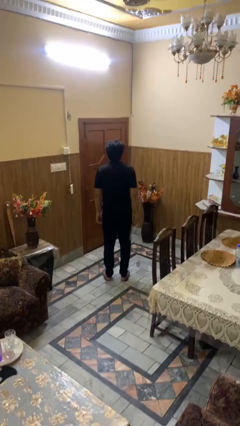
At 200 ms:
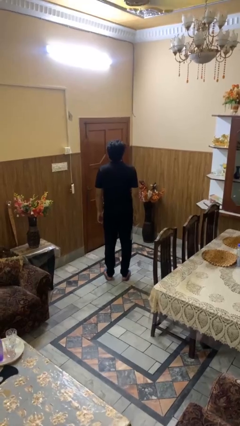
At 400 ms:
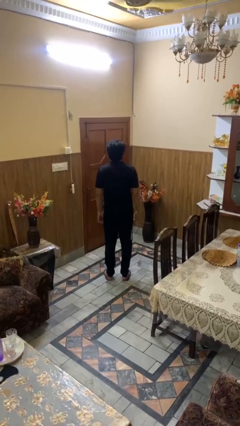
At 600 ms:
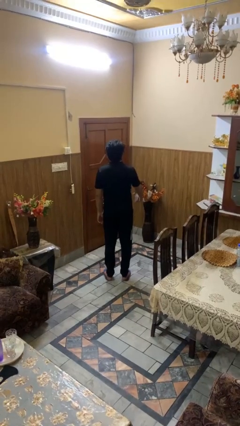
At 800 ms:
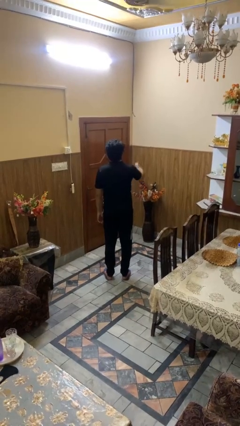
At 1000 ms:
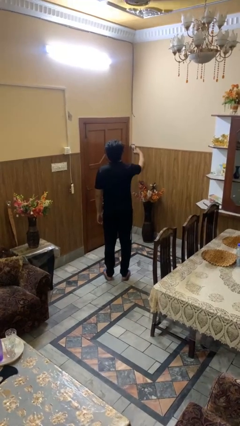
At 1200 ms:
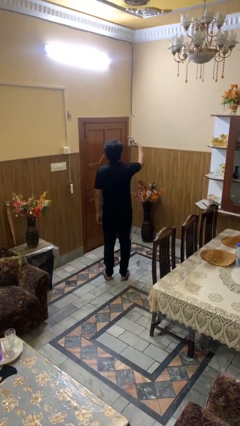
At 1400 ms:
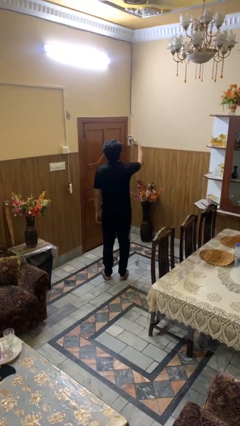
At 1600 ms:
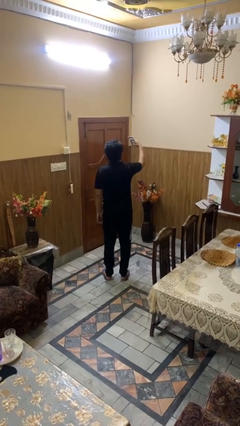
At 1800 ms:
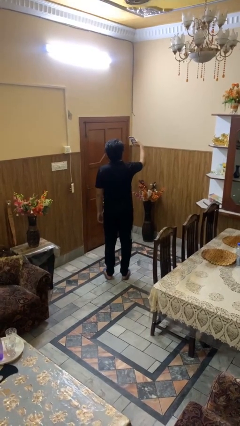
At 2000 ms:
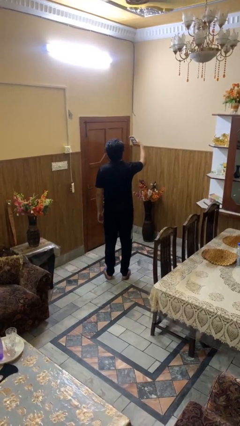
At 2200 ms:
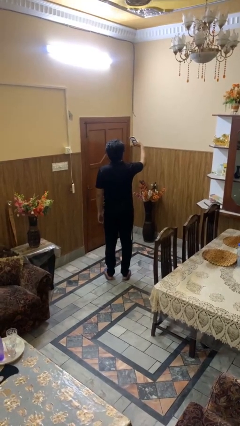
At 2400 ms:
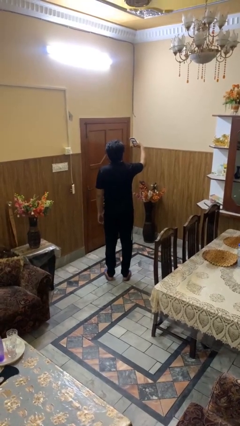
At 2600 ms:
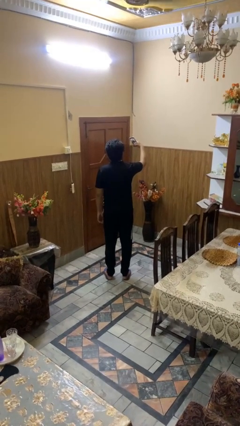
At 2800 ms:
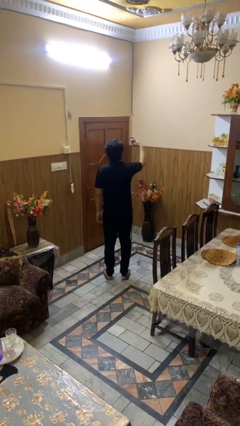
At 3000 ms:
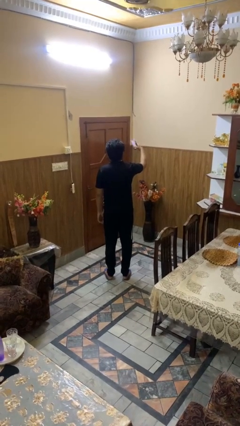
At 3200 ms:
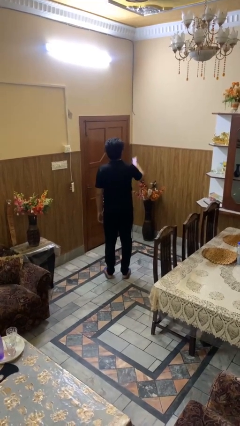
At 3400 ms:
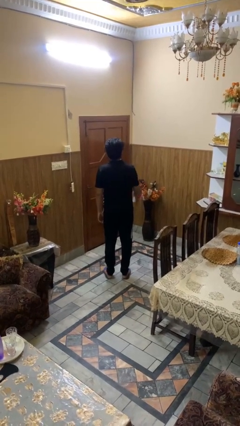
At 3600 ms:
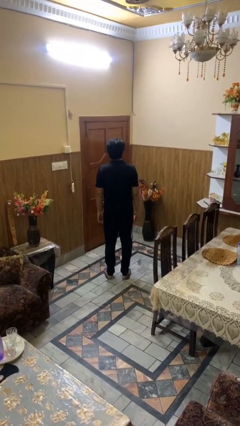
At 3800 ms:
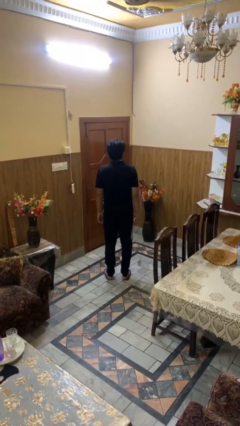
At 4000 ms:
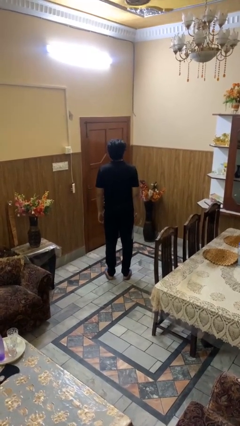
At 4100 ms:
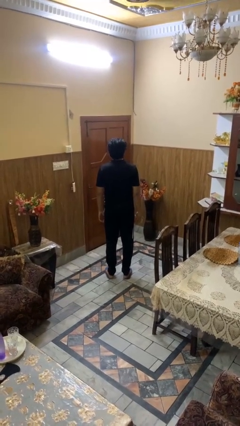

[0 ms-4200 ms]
person takes selfie

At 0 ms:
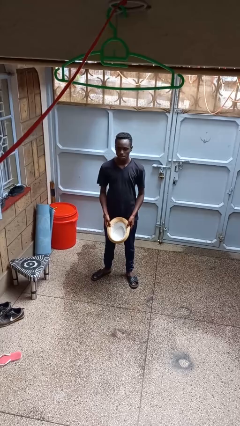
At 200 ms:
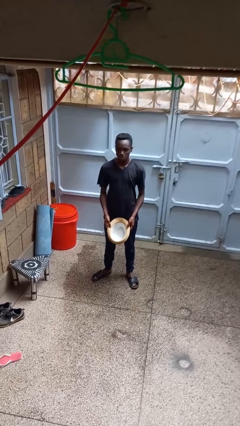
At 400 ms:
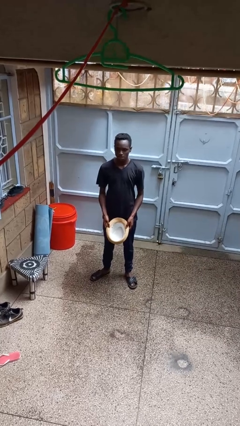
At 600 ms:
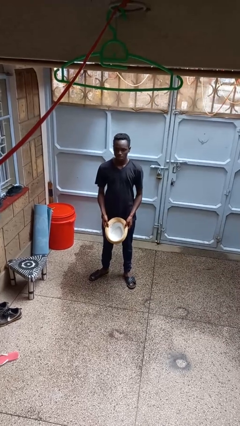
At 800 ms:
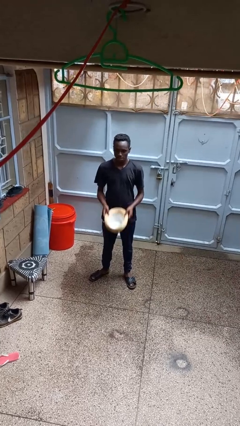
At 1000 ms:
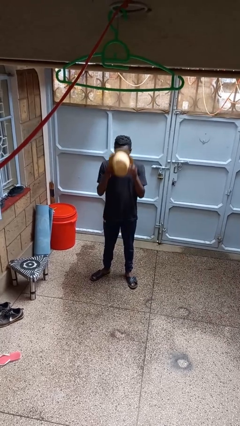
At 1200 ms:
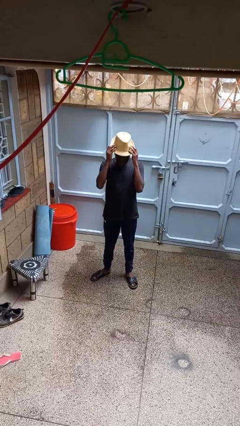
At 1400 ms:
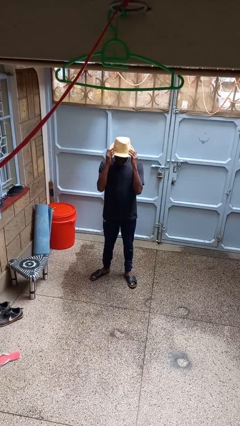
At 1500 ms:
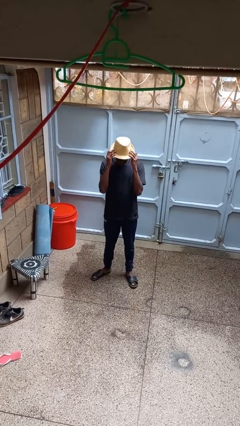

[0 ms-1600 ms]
person puts on hat

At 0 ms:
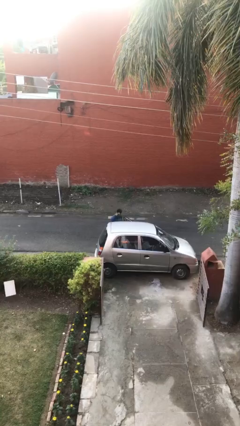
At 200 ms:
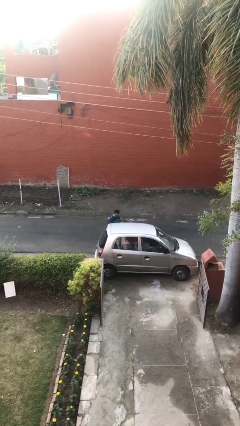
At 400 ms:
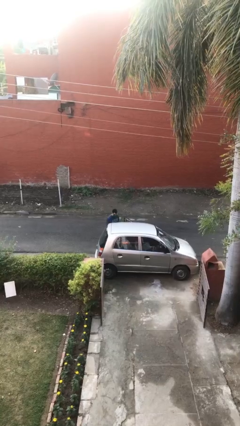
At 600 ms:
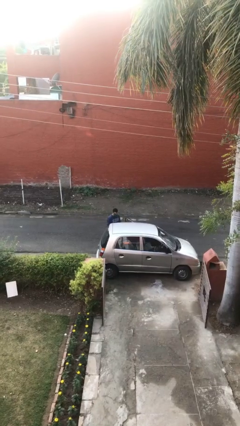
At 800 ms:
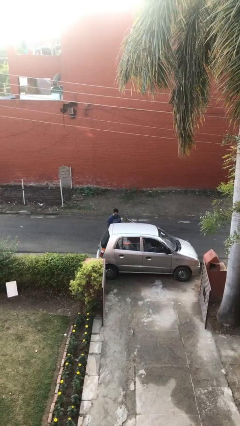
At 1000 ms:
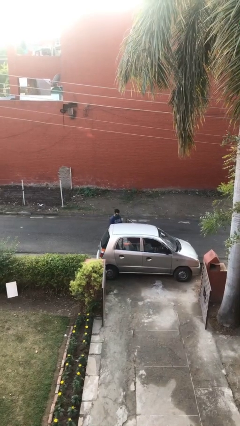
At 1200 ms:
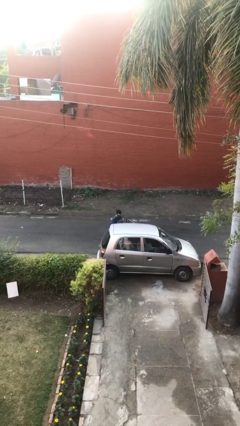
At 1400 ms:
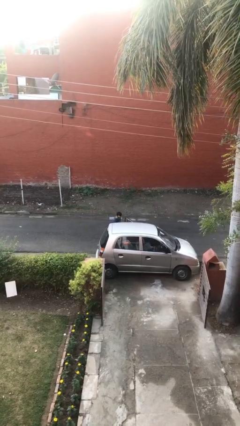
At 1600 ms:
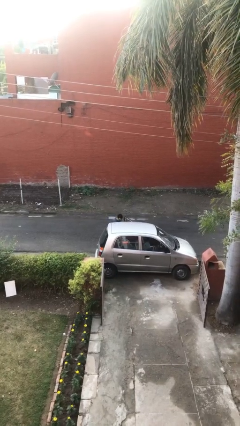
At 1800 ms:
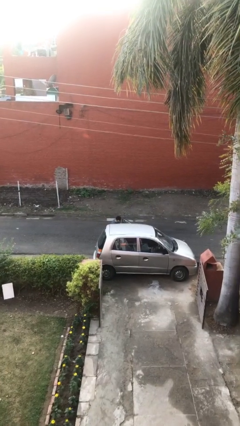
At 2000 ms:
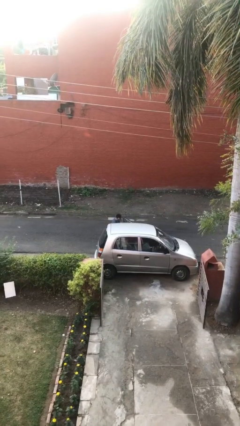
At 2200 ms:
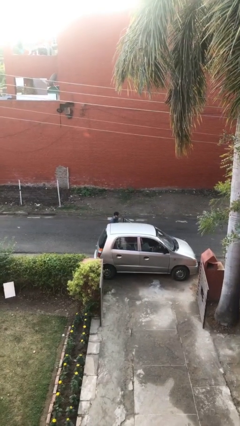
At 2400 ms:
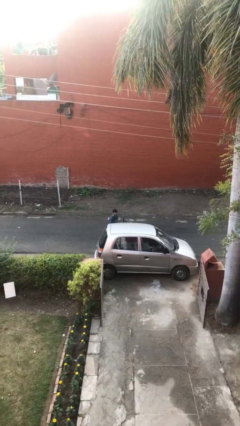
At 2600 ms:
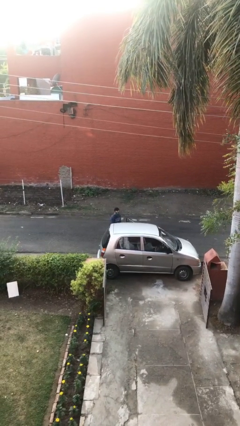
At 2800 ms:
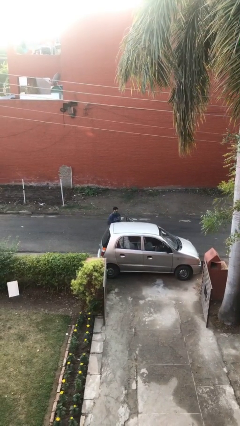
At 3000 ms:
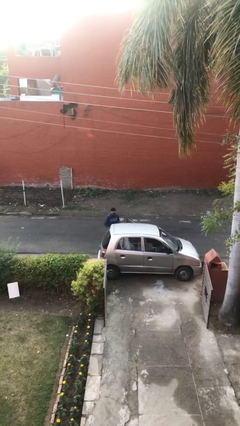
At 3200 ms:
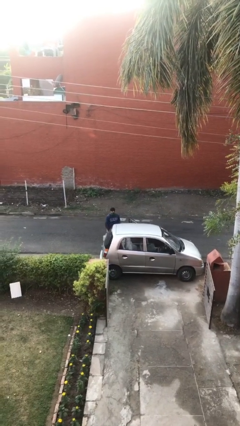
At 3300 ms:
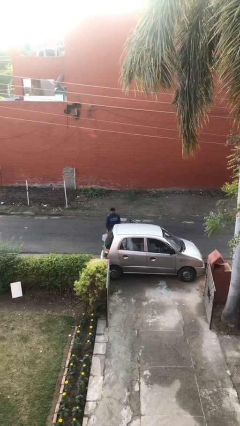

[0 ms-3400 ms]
person unloads car

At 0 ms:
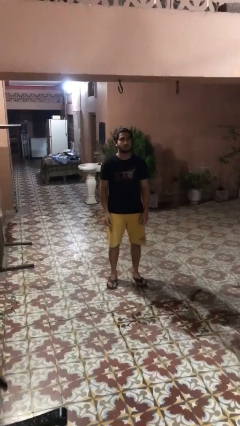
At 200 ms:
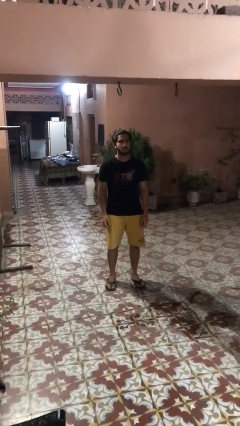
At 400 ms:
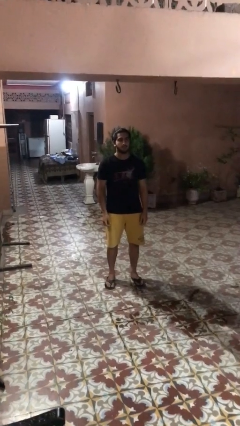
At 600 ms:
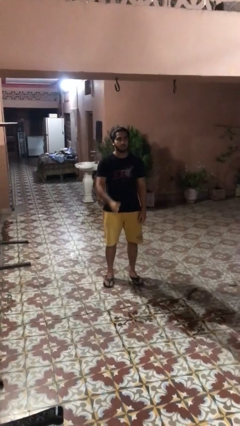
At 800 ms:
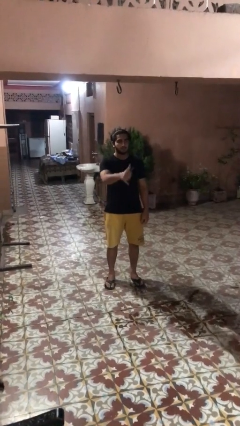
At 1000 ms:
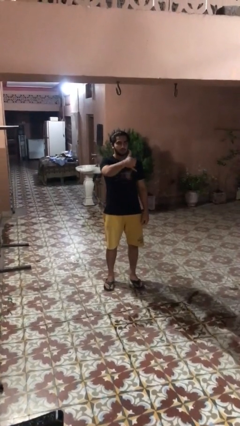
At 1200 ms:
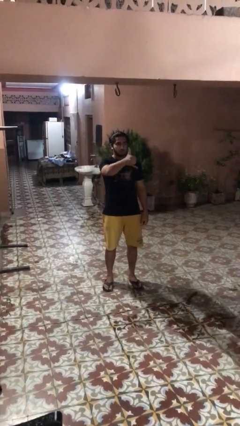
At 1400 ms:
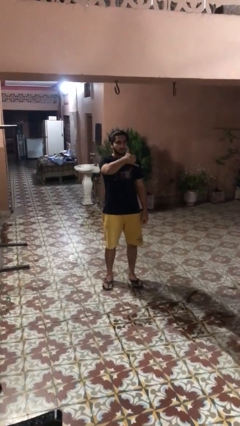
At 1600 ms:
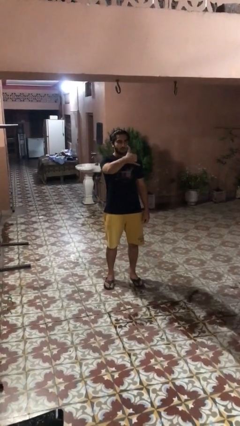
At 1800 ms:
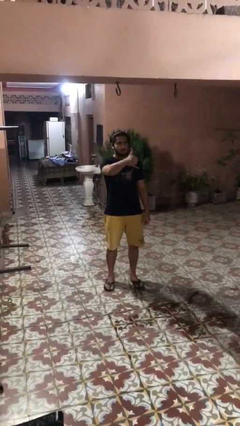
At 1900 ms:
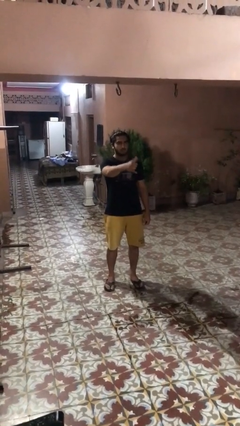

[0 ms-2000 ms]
person gestures hang loose

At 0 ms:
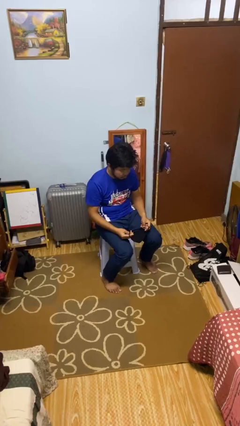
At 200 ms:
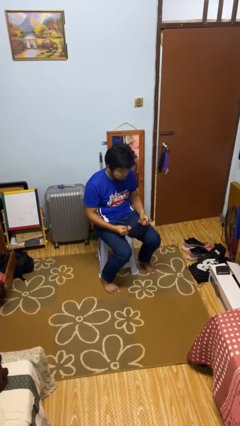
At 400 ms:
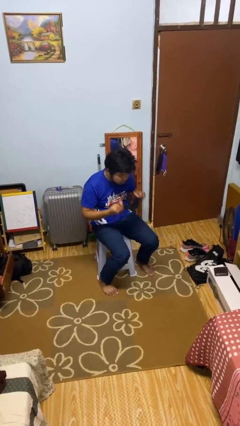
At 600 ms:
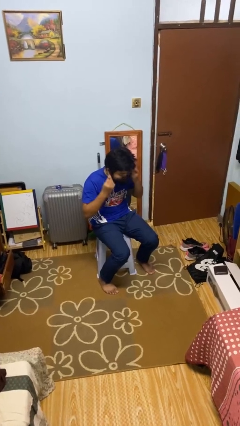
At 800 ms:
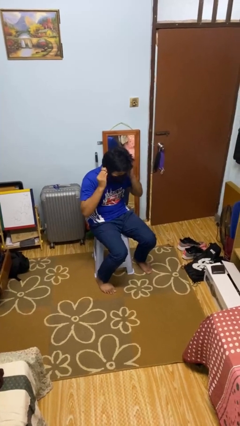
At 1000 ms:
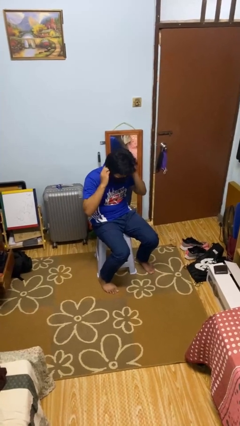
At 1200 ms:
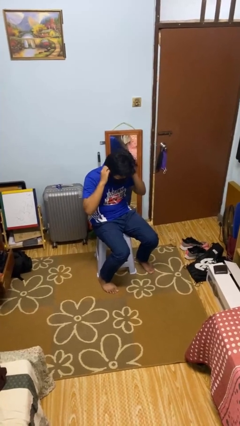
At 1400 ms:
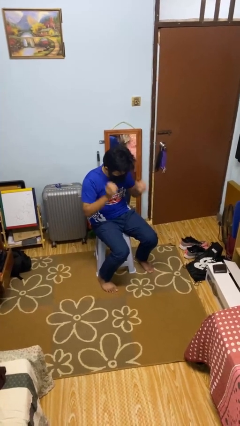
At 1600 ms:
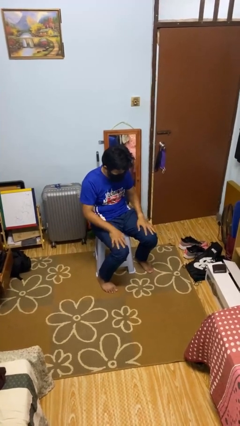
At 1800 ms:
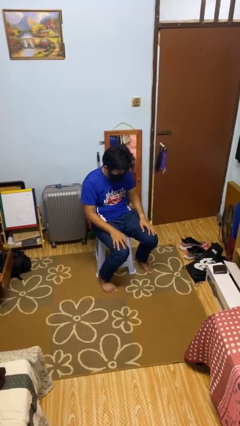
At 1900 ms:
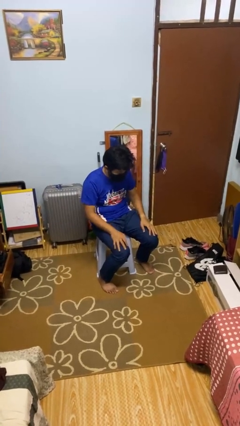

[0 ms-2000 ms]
person puts on facemask

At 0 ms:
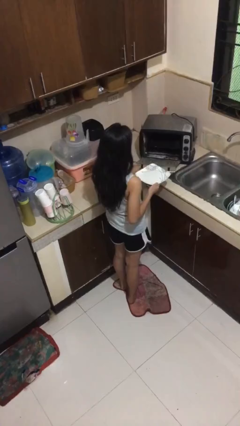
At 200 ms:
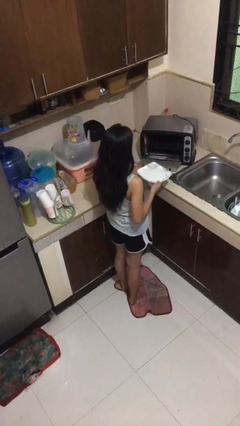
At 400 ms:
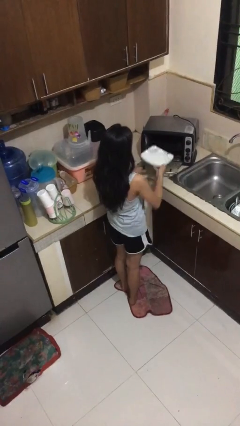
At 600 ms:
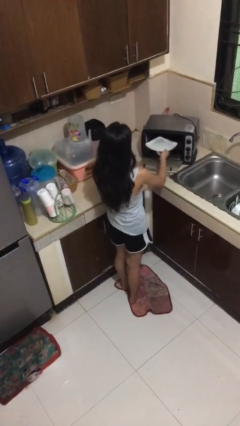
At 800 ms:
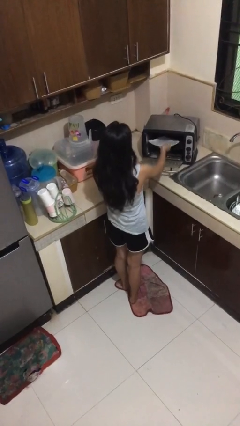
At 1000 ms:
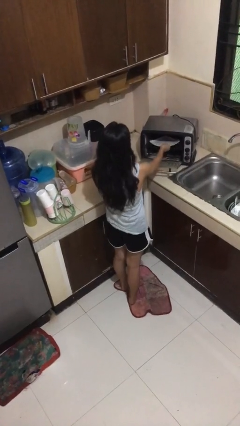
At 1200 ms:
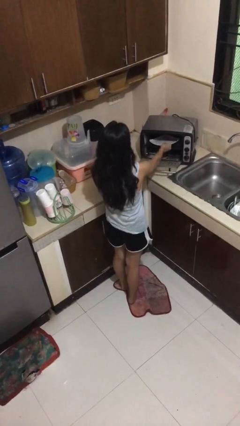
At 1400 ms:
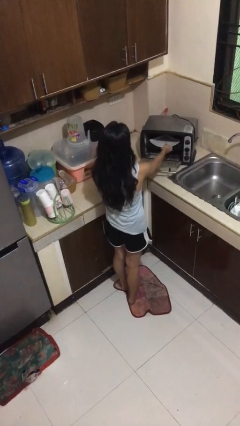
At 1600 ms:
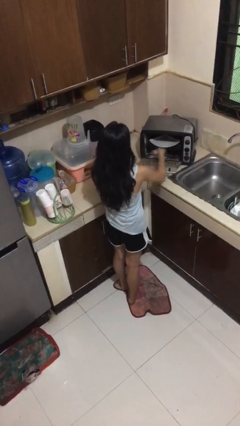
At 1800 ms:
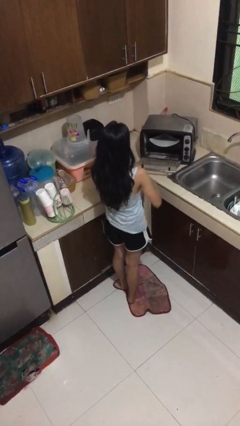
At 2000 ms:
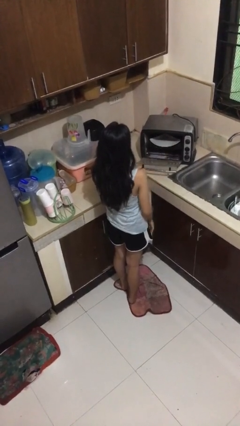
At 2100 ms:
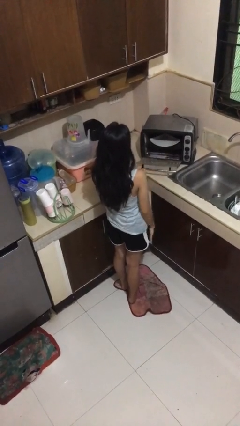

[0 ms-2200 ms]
person puts object into microwave

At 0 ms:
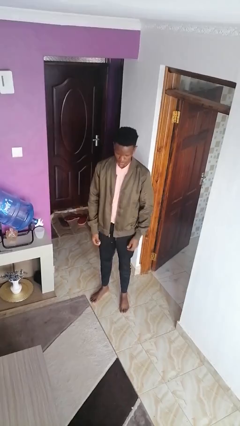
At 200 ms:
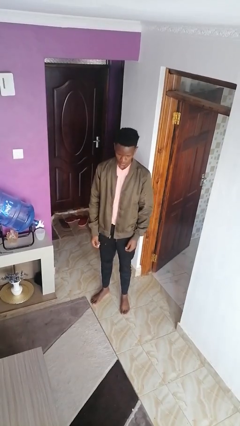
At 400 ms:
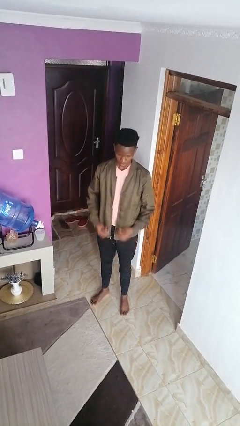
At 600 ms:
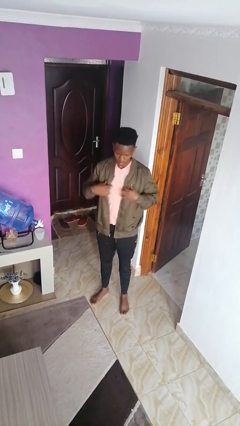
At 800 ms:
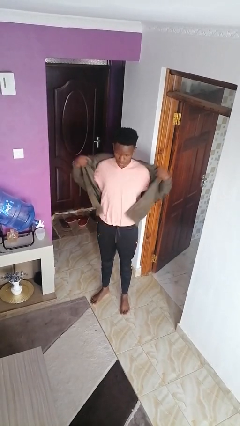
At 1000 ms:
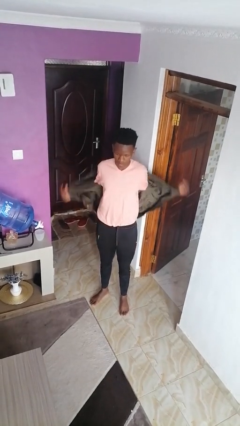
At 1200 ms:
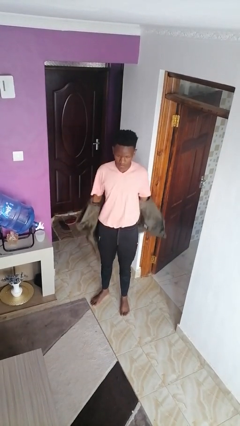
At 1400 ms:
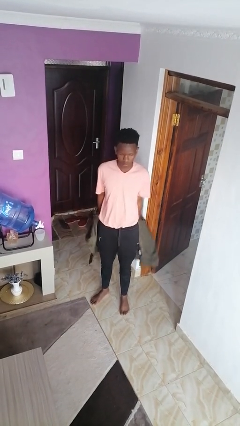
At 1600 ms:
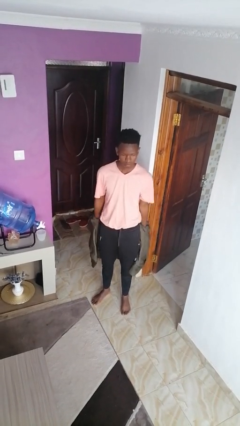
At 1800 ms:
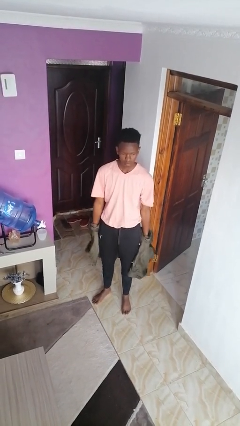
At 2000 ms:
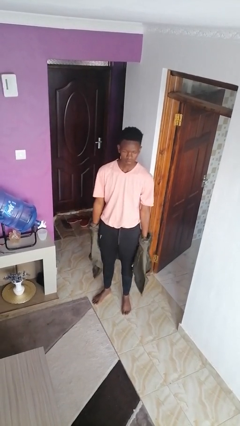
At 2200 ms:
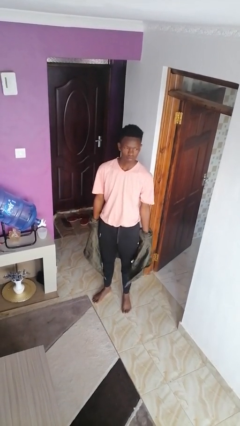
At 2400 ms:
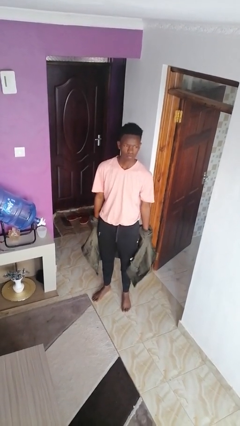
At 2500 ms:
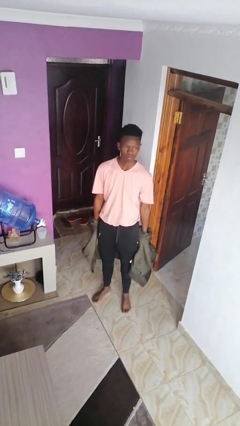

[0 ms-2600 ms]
person takes off jacket
